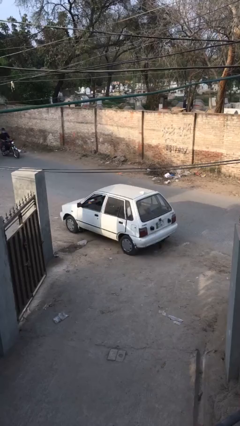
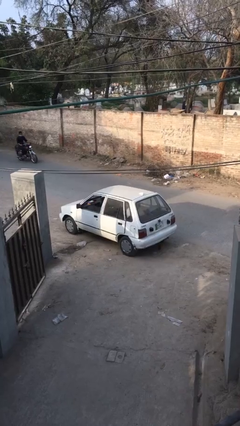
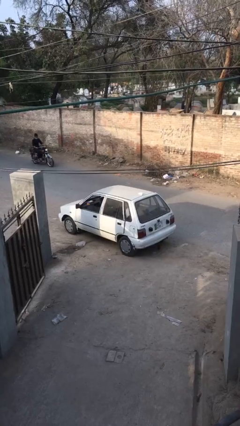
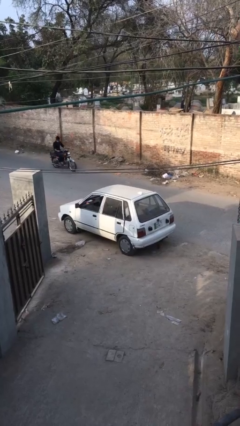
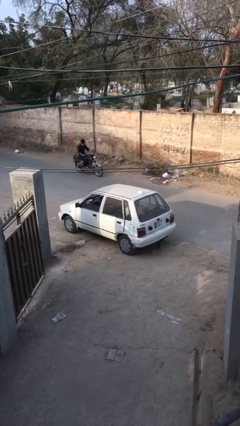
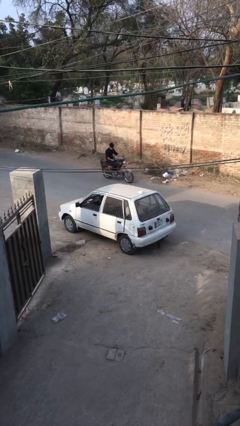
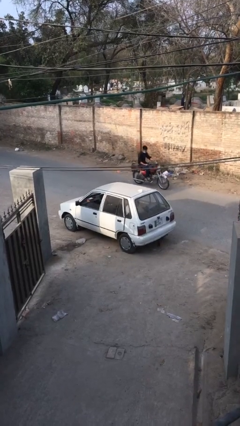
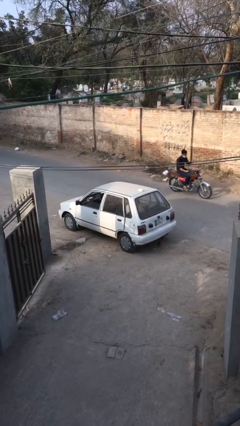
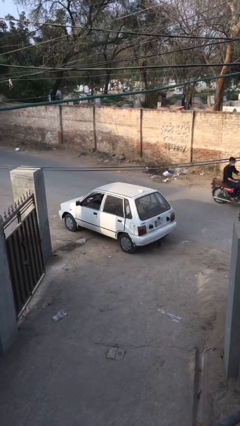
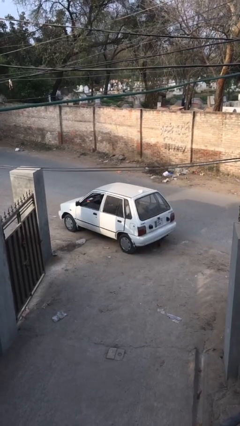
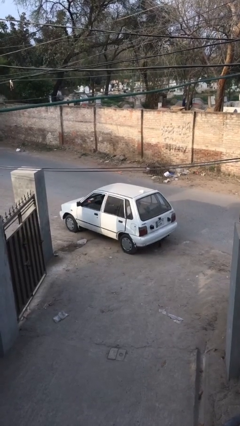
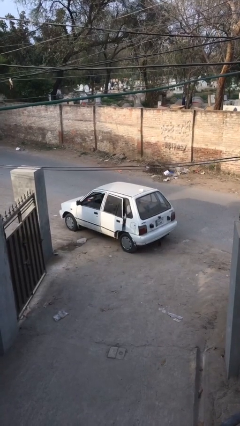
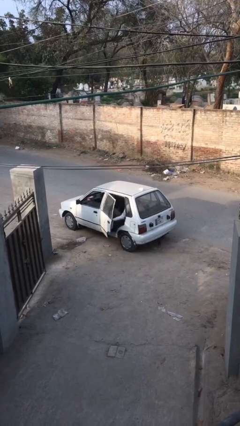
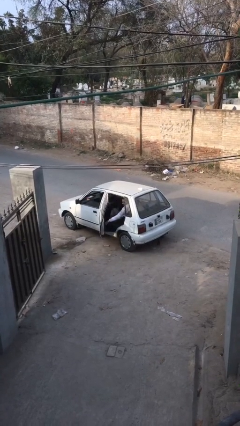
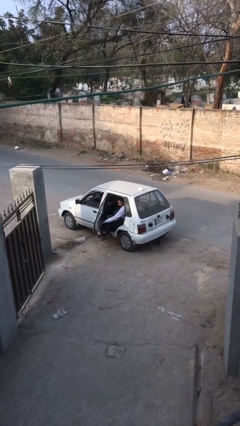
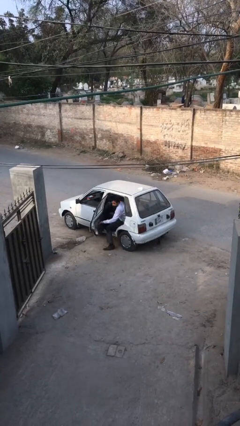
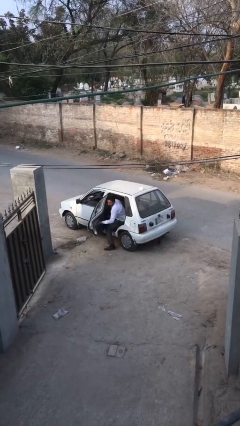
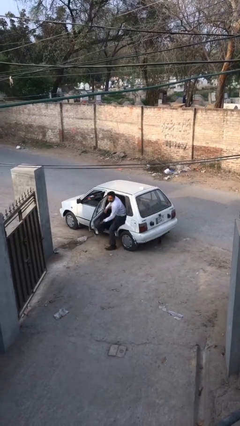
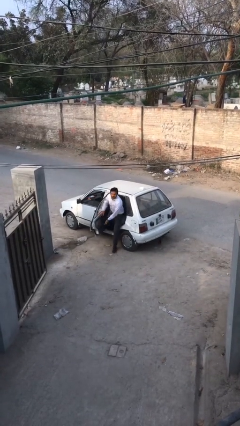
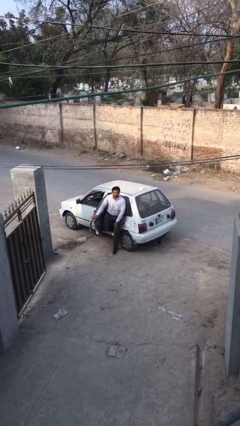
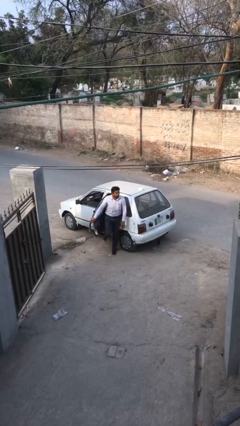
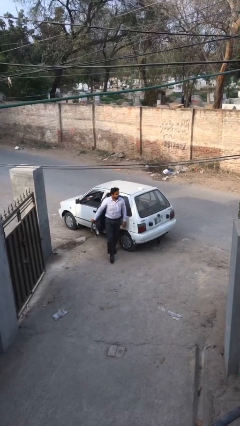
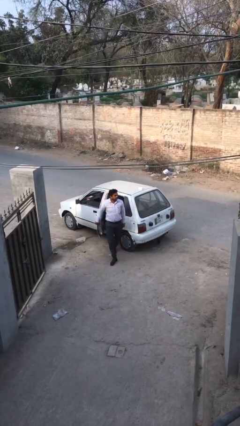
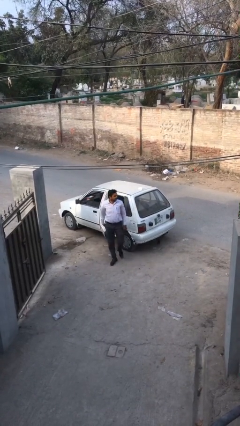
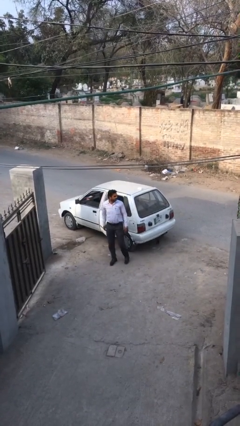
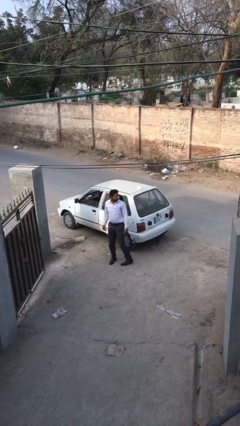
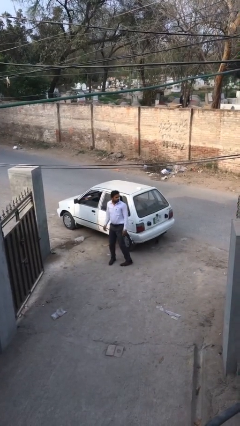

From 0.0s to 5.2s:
car drops off person

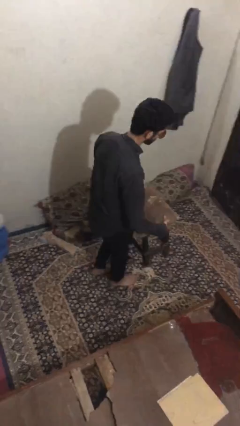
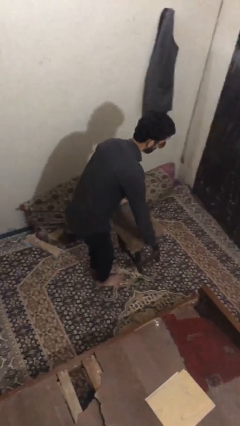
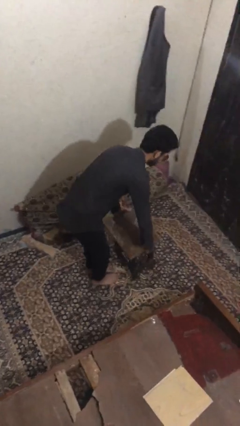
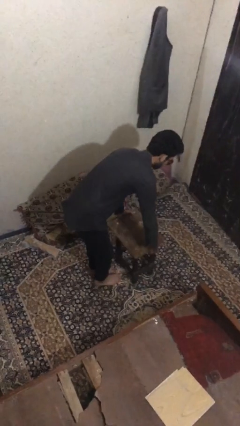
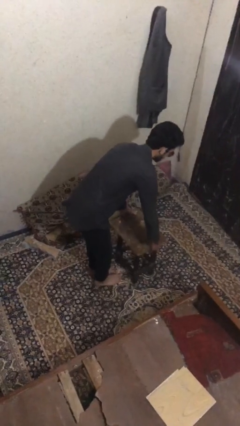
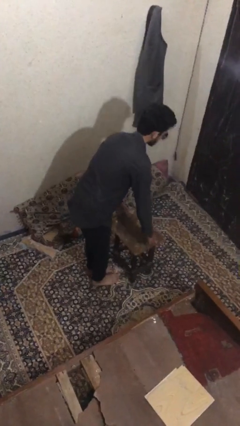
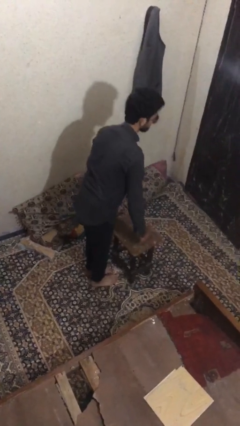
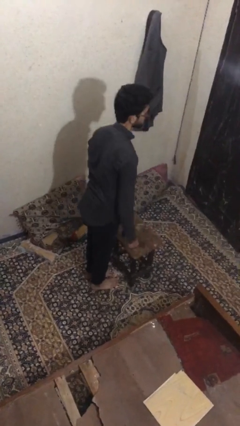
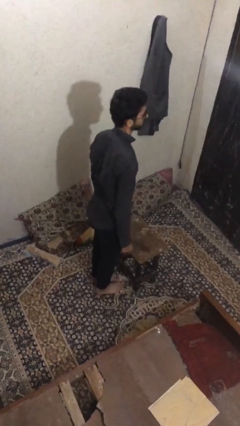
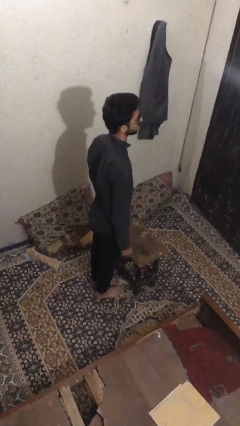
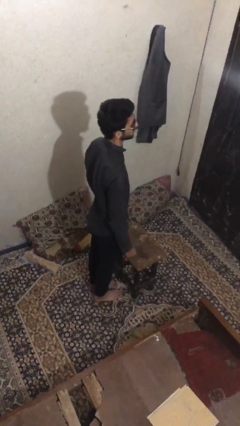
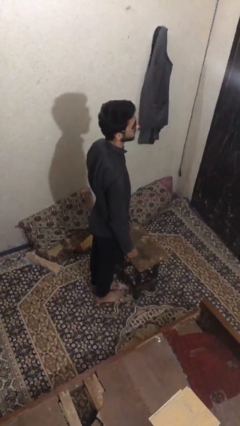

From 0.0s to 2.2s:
person puts down object on floor

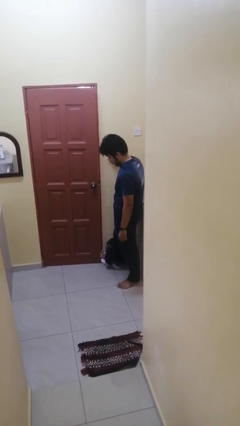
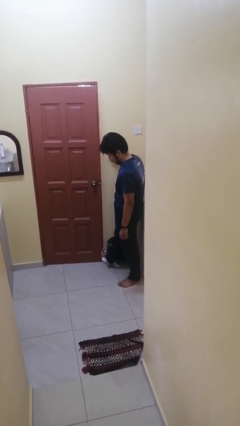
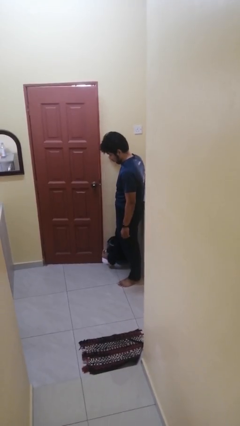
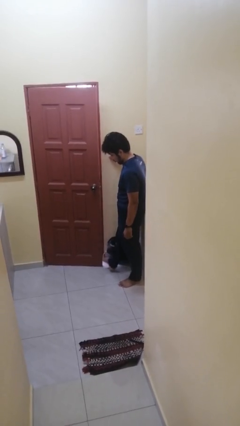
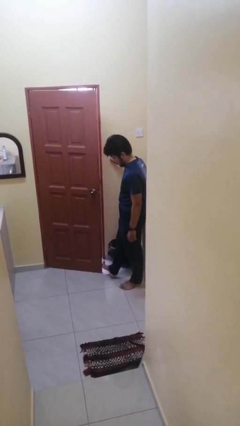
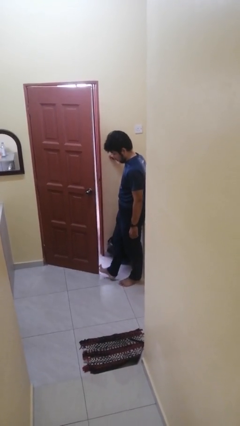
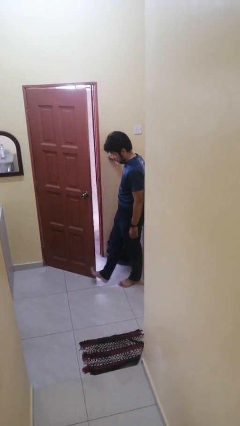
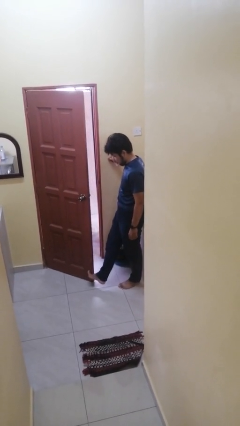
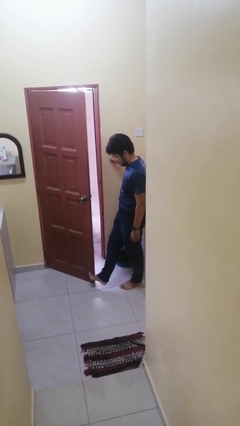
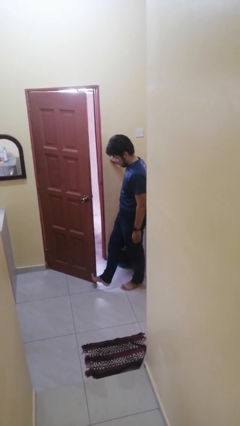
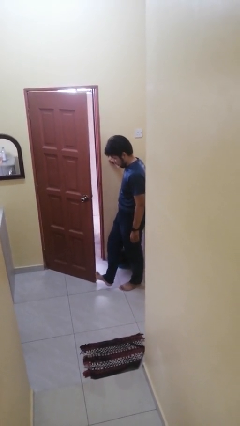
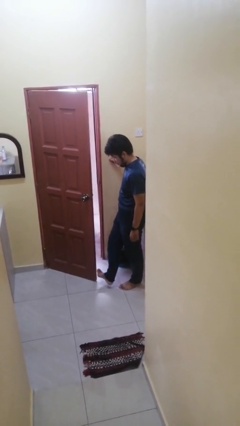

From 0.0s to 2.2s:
person opens facility door

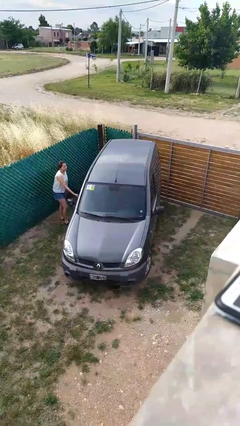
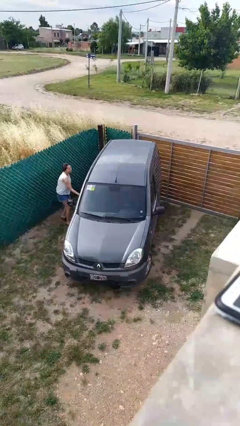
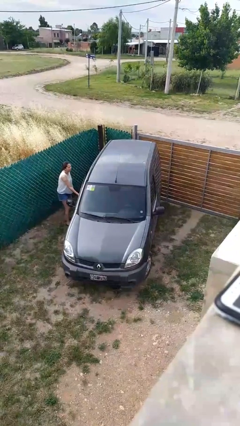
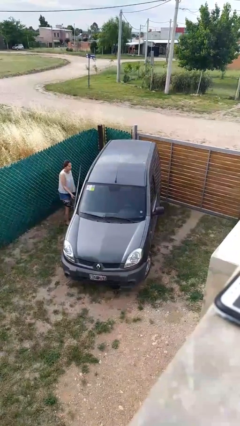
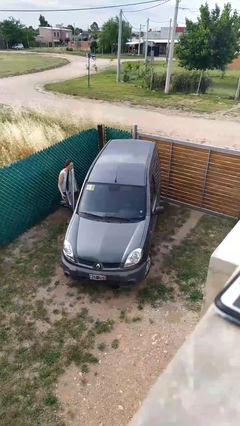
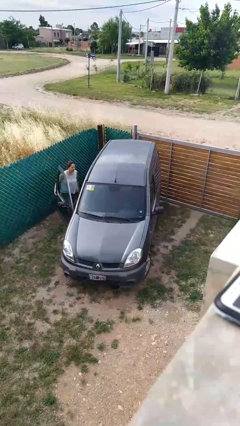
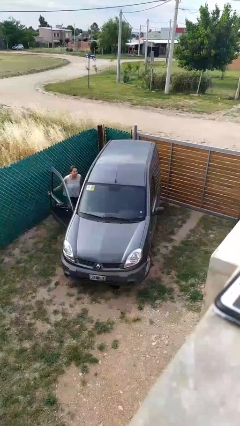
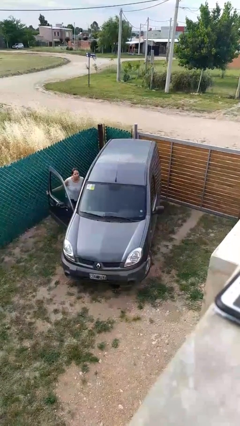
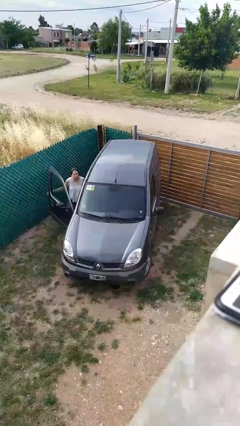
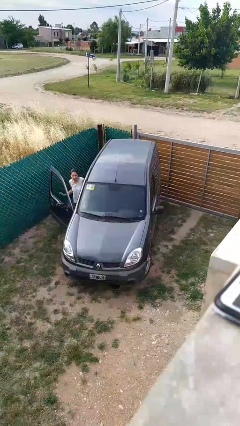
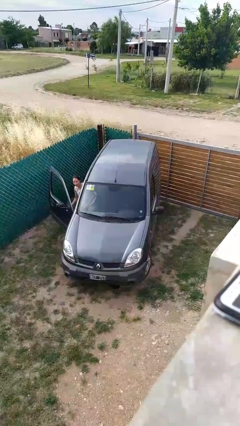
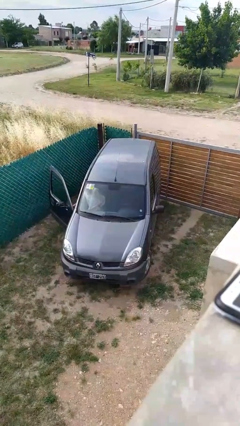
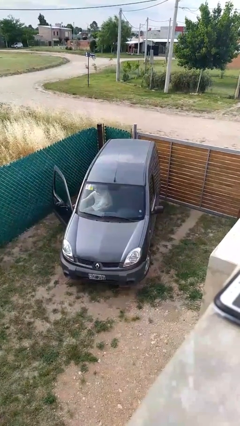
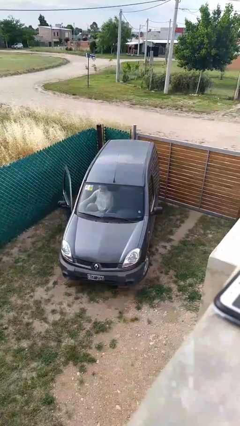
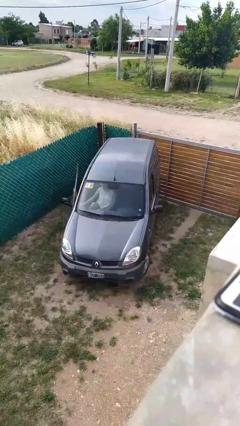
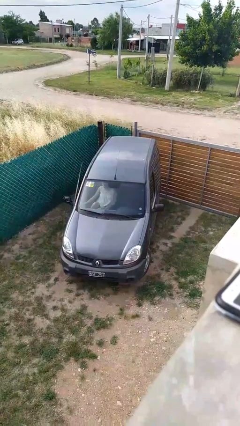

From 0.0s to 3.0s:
car picks up person

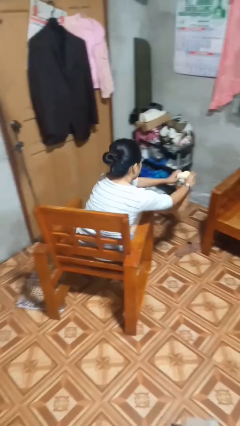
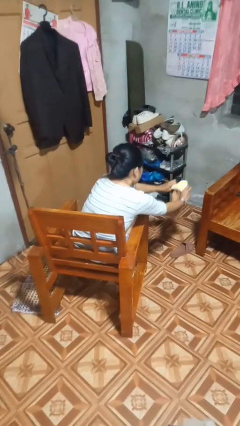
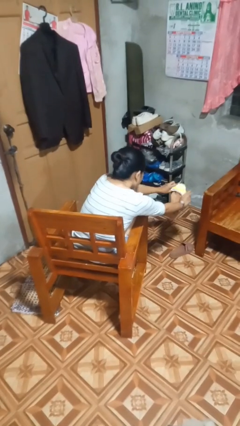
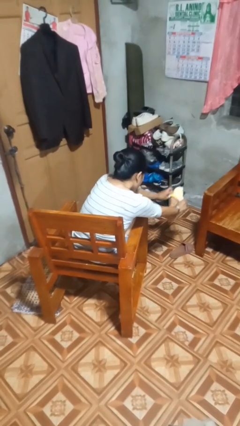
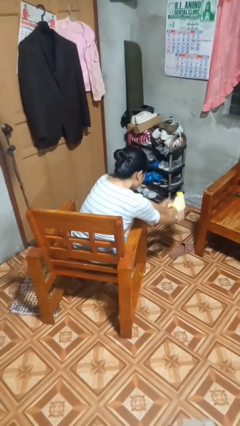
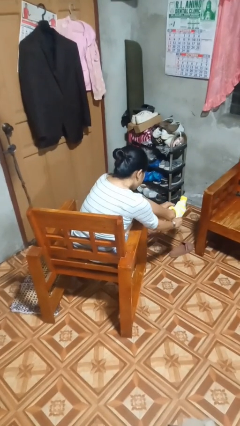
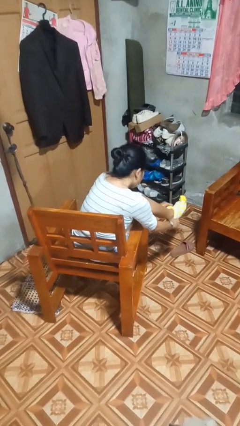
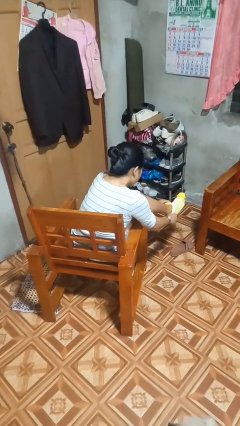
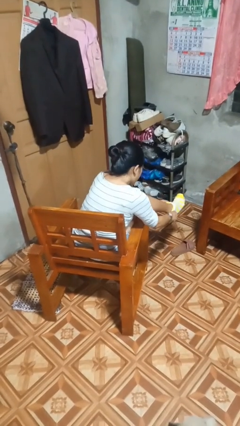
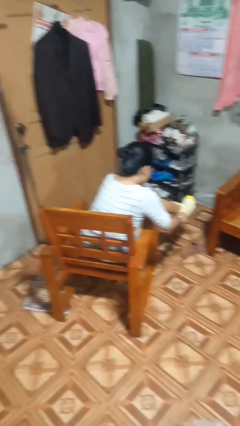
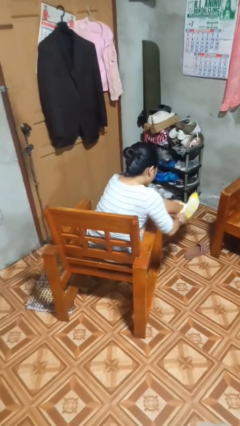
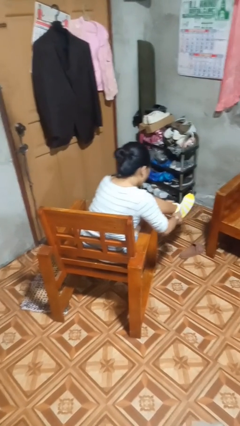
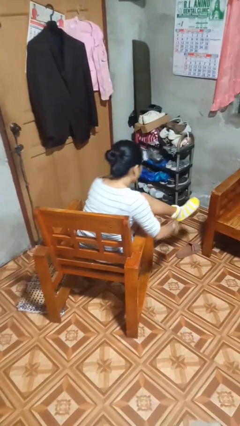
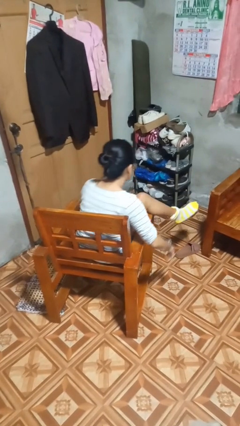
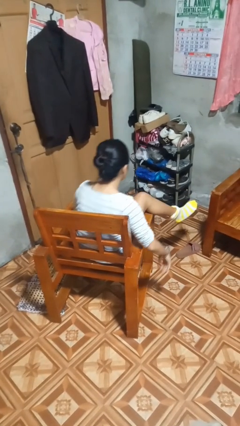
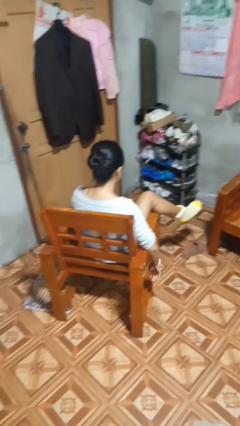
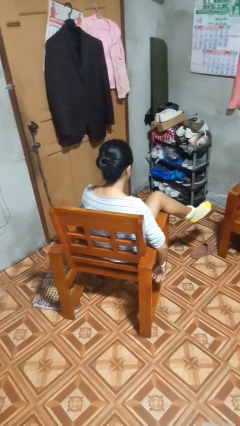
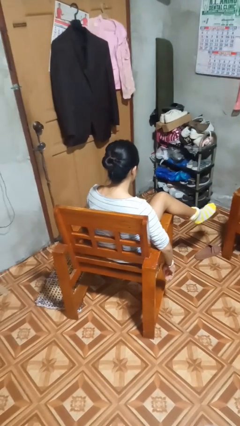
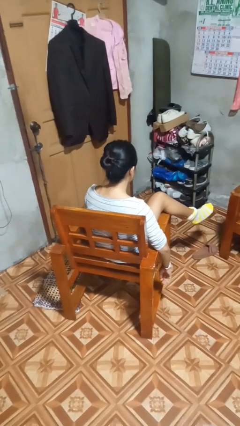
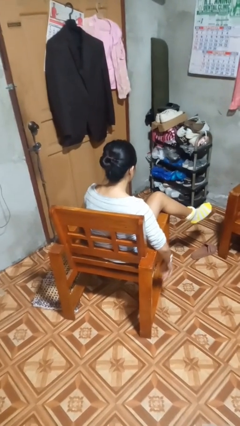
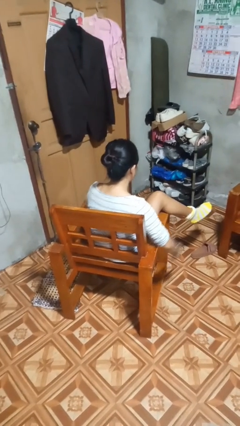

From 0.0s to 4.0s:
person puts on socks

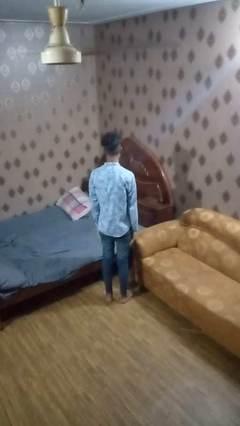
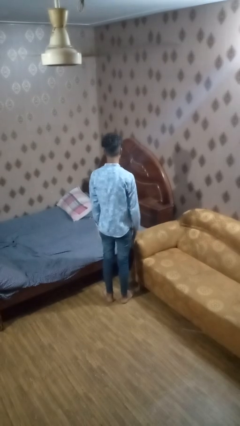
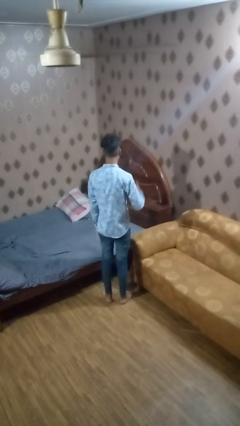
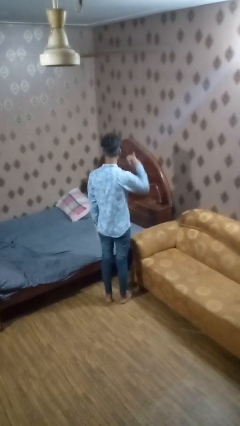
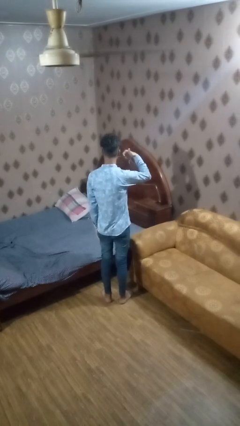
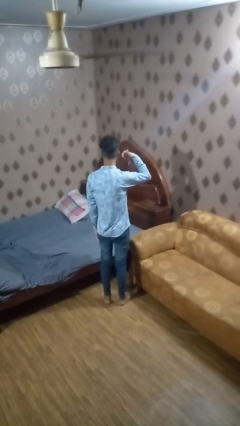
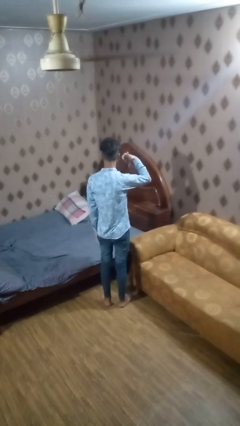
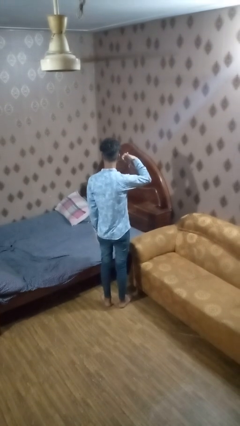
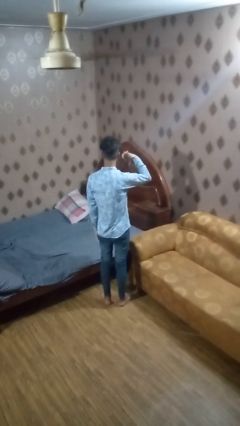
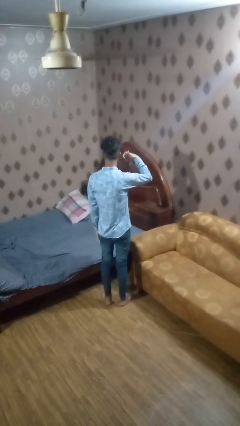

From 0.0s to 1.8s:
person gestures call me
